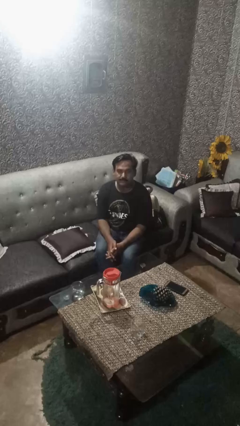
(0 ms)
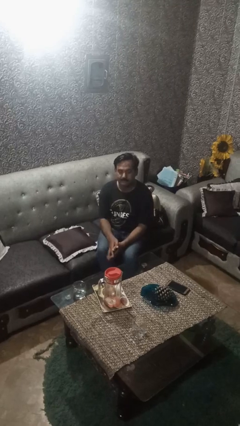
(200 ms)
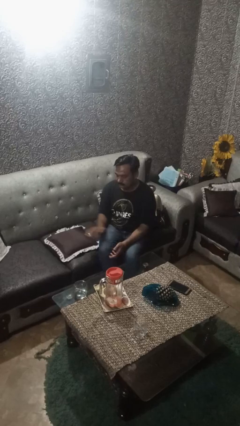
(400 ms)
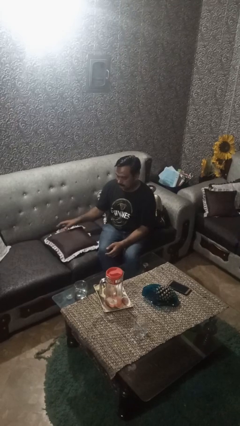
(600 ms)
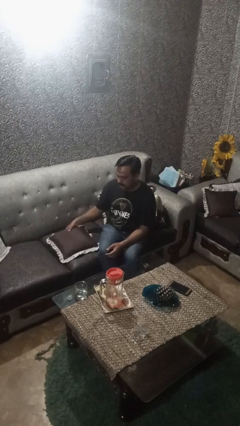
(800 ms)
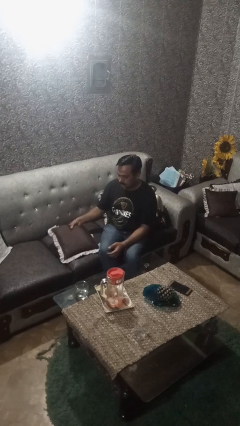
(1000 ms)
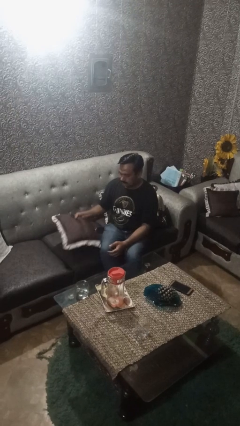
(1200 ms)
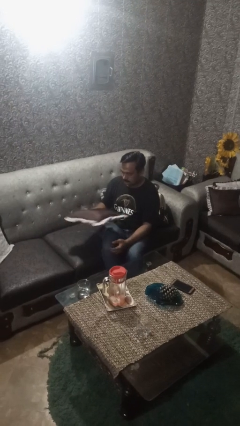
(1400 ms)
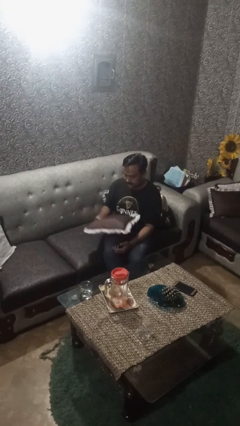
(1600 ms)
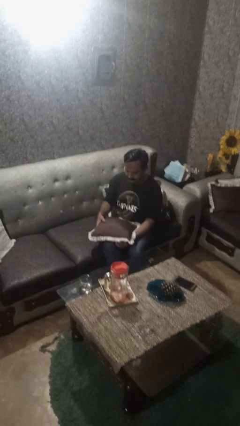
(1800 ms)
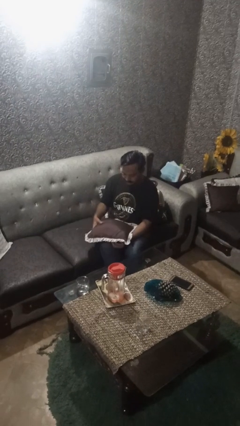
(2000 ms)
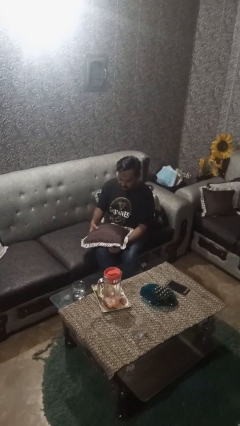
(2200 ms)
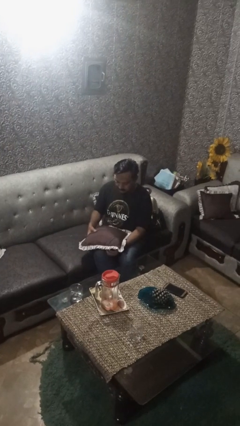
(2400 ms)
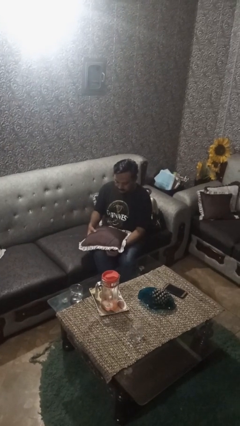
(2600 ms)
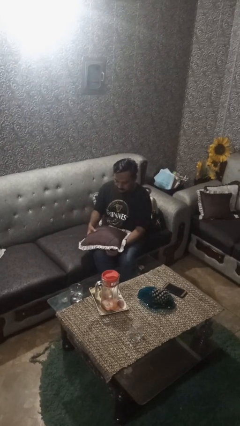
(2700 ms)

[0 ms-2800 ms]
person picks up object from couch

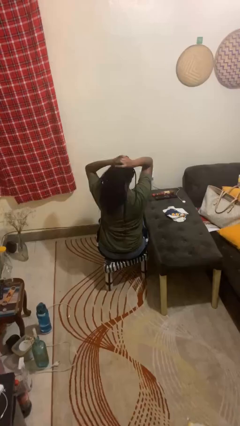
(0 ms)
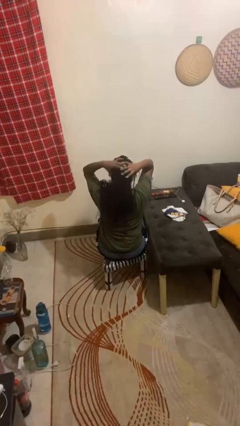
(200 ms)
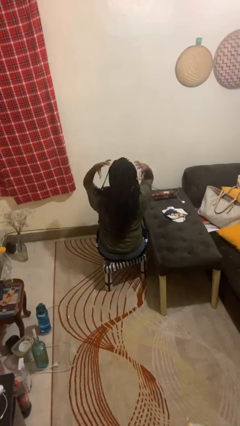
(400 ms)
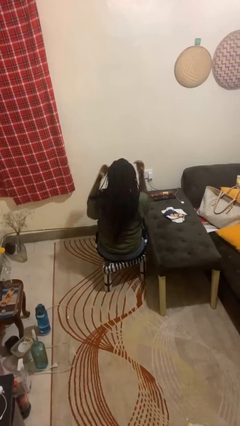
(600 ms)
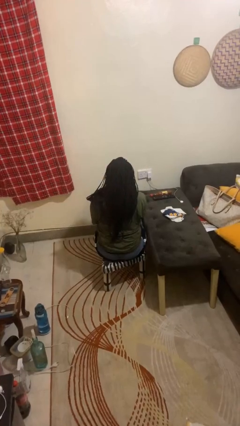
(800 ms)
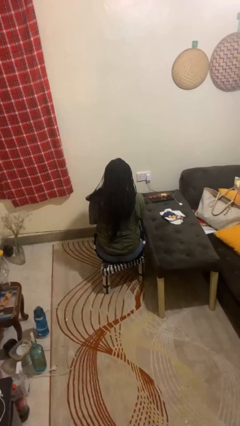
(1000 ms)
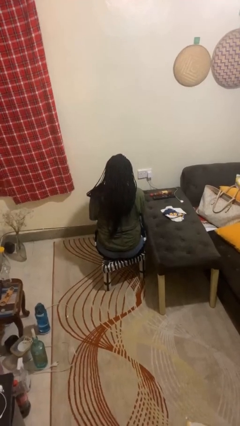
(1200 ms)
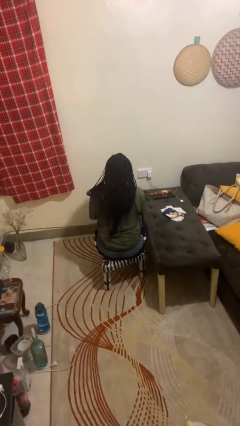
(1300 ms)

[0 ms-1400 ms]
person takes off hairtie

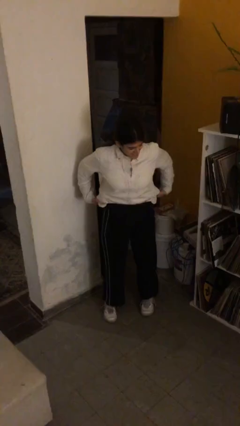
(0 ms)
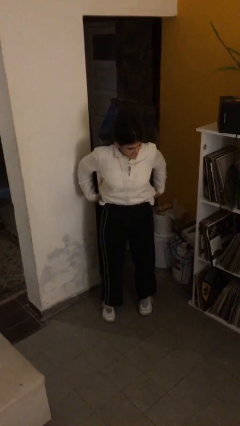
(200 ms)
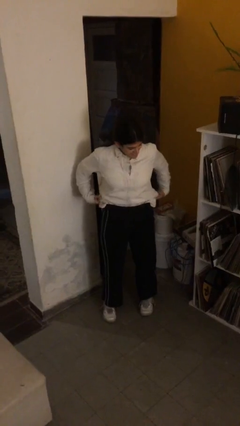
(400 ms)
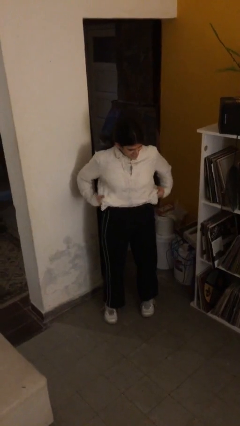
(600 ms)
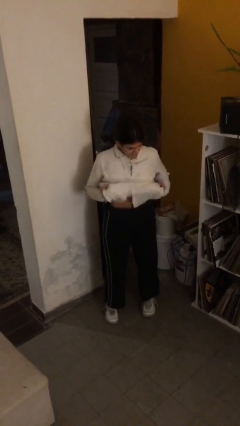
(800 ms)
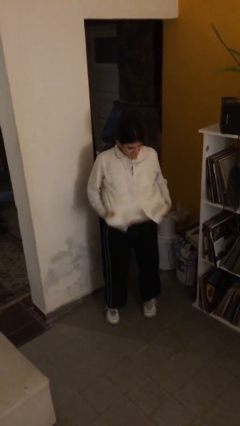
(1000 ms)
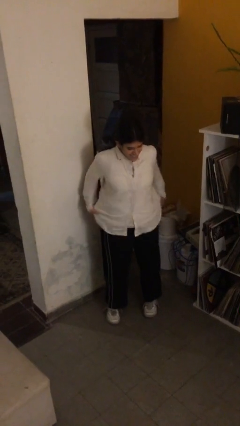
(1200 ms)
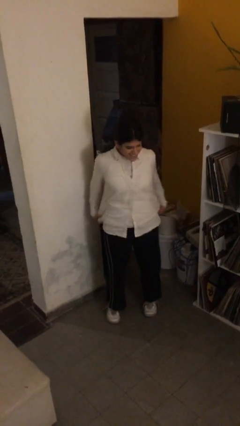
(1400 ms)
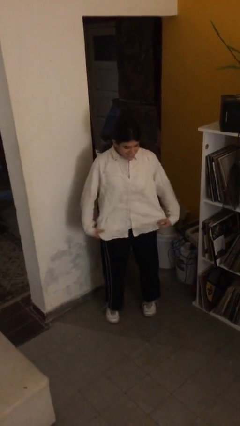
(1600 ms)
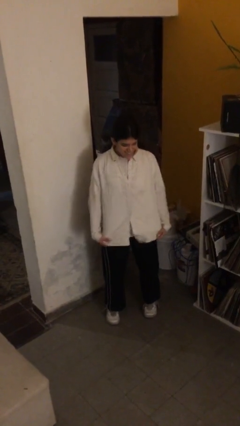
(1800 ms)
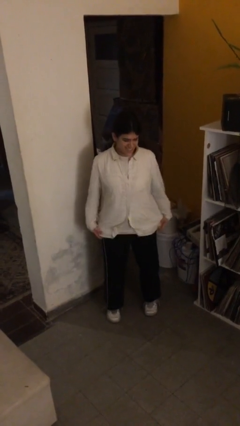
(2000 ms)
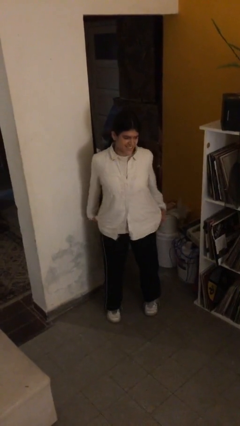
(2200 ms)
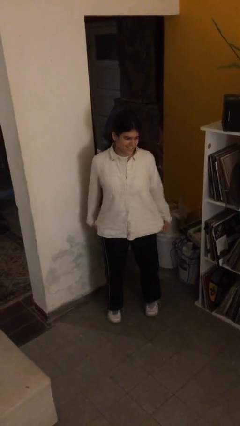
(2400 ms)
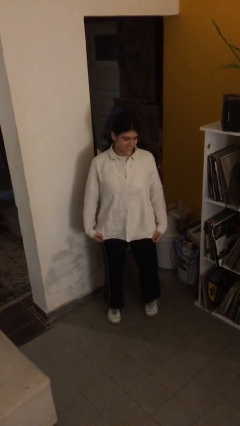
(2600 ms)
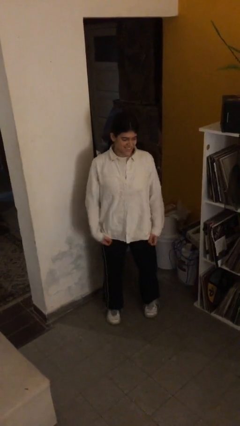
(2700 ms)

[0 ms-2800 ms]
person untucks shirt

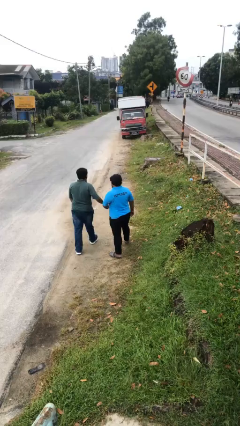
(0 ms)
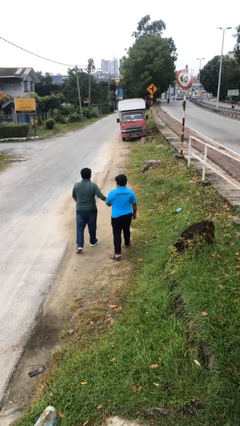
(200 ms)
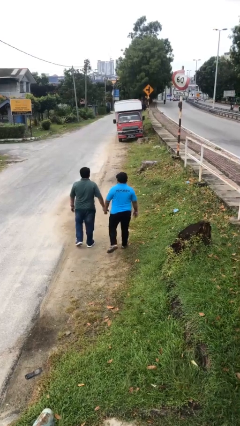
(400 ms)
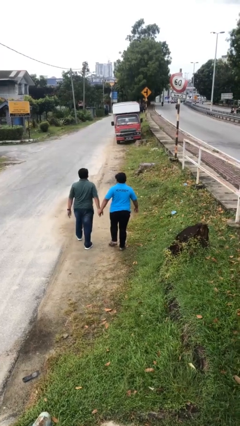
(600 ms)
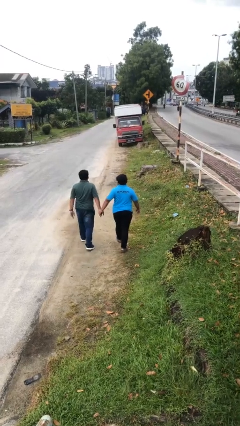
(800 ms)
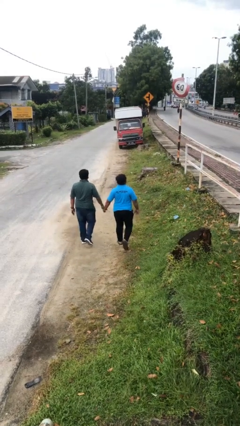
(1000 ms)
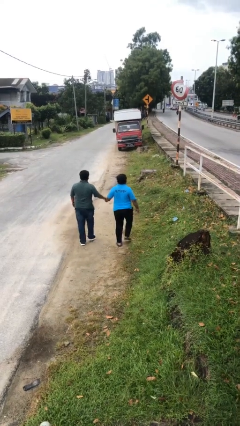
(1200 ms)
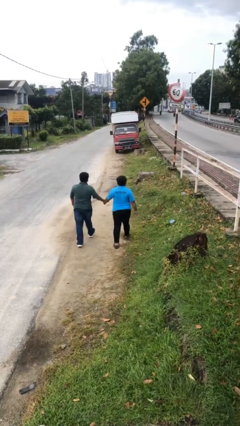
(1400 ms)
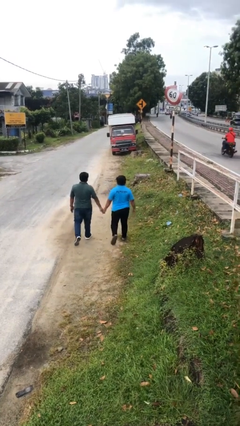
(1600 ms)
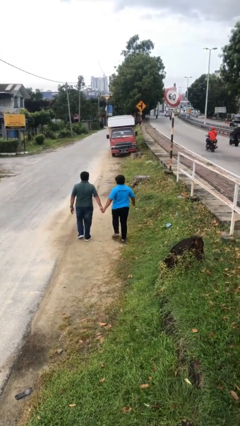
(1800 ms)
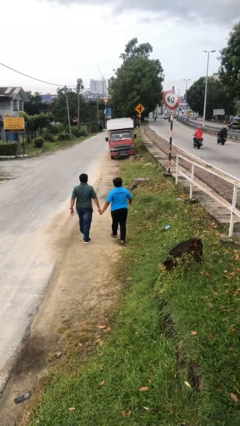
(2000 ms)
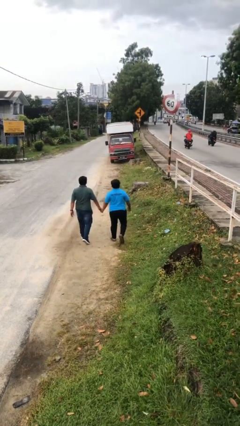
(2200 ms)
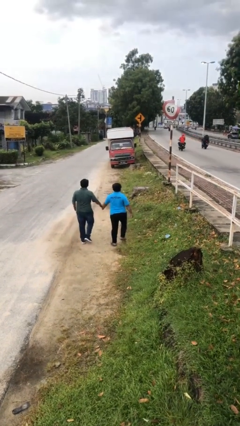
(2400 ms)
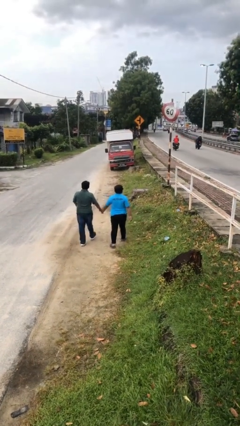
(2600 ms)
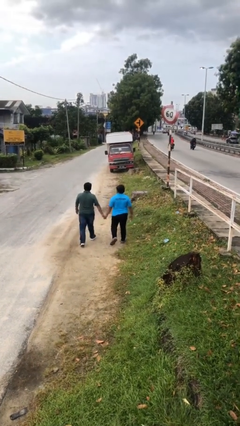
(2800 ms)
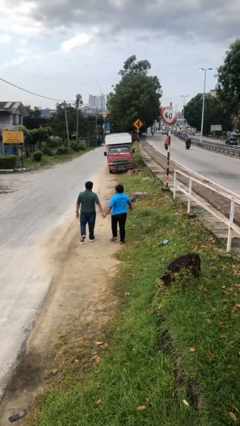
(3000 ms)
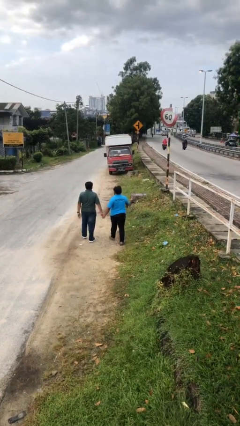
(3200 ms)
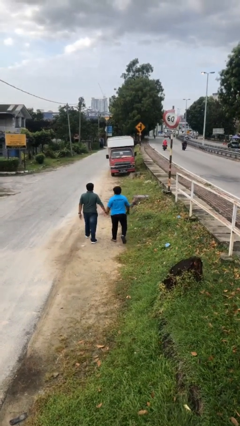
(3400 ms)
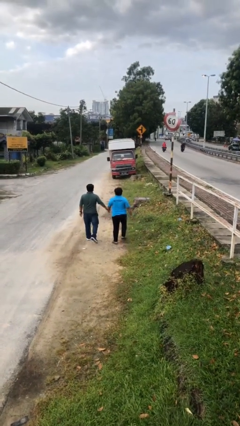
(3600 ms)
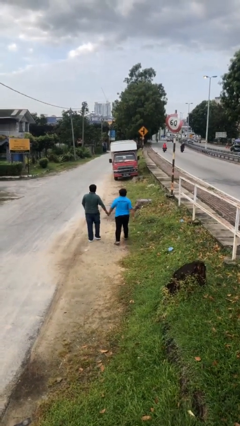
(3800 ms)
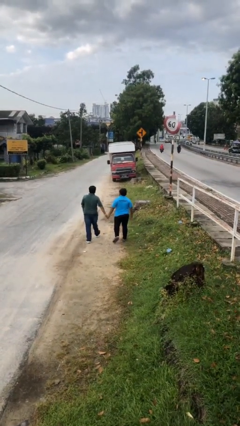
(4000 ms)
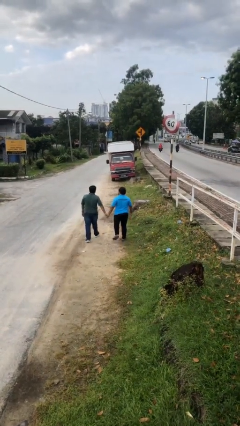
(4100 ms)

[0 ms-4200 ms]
person holds hand

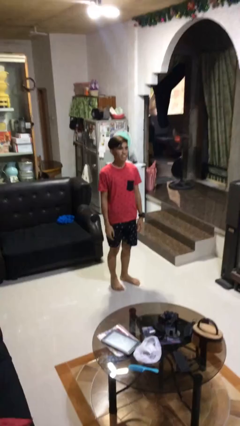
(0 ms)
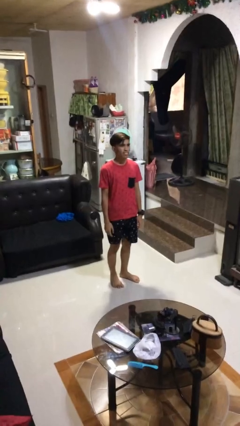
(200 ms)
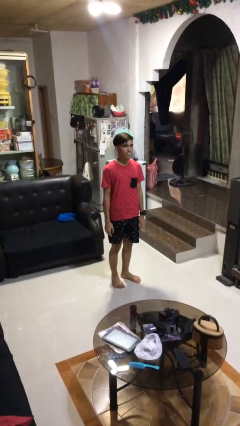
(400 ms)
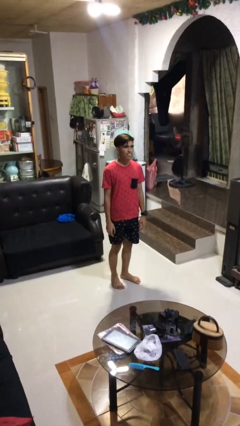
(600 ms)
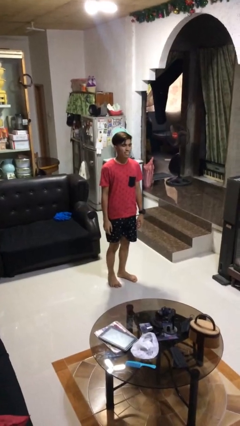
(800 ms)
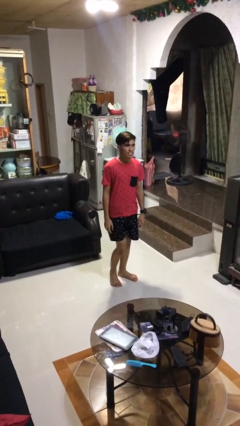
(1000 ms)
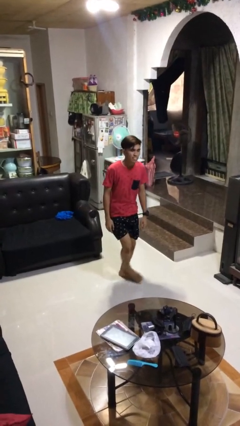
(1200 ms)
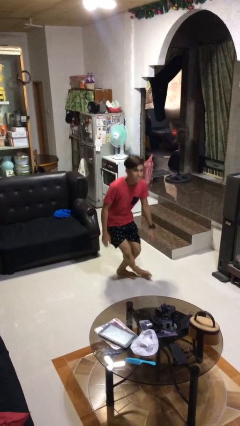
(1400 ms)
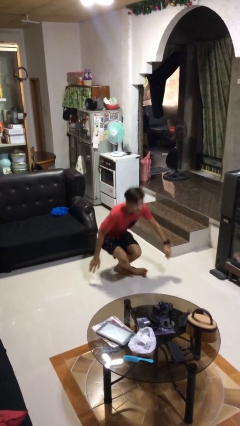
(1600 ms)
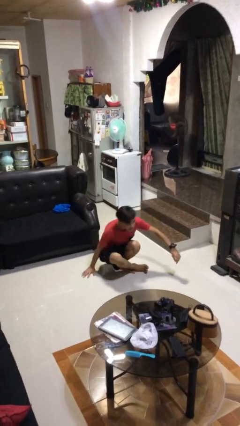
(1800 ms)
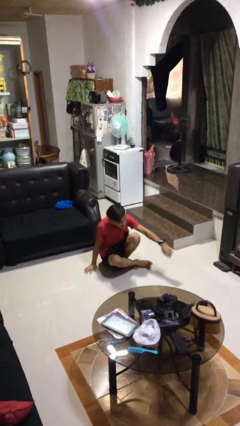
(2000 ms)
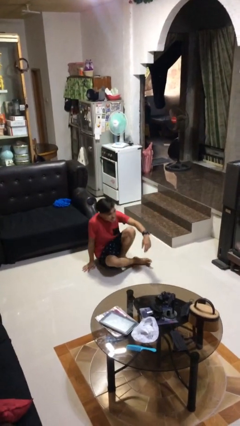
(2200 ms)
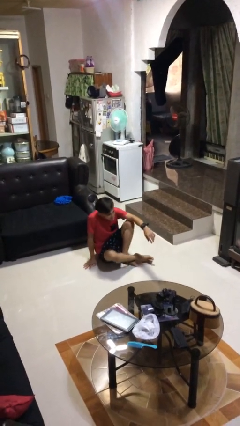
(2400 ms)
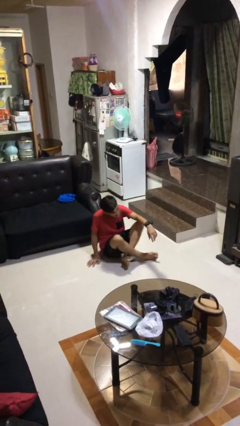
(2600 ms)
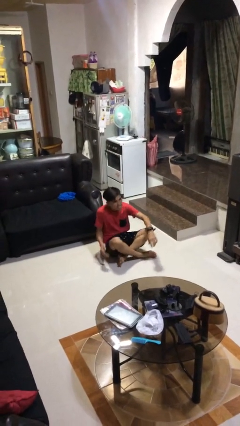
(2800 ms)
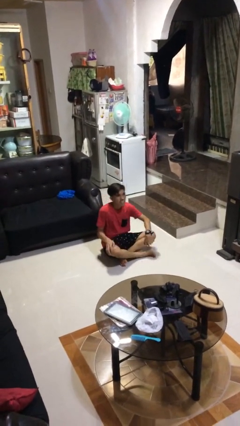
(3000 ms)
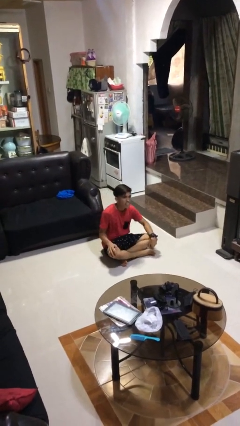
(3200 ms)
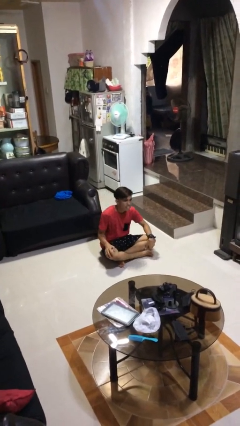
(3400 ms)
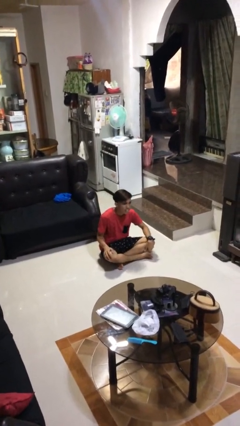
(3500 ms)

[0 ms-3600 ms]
person sits crisscross

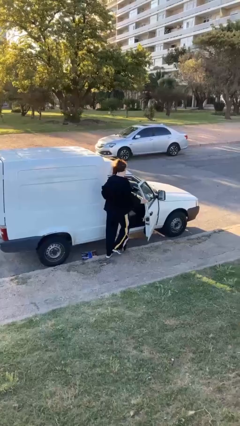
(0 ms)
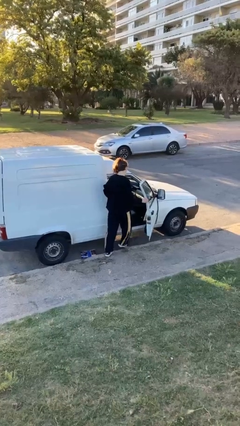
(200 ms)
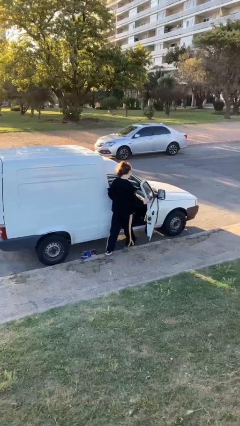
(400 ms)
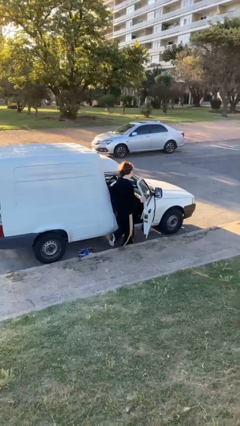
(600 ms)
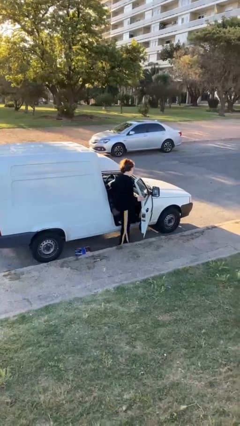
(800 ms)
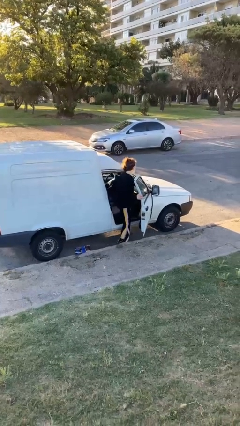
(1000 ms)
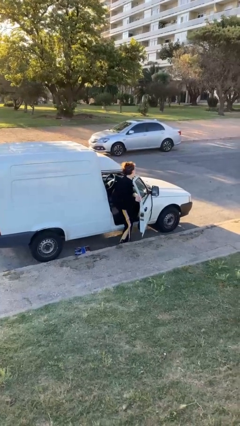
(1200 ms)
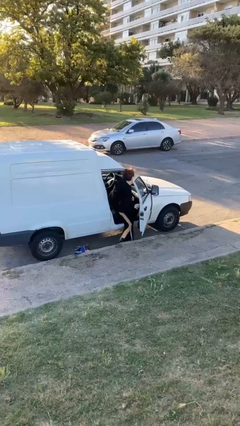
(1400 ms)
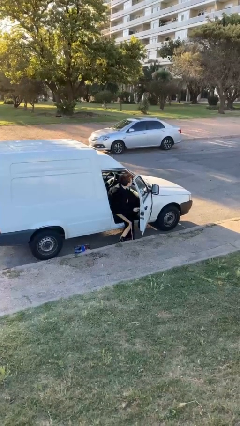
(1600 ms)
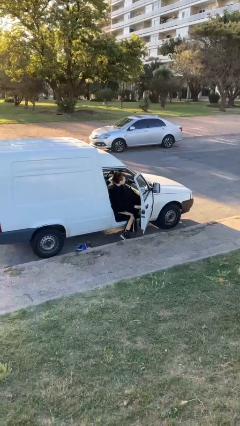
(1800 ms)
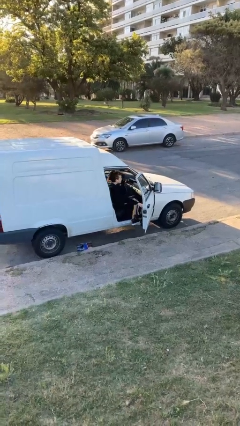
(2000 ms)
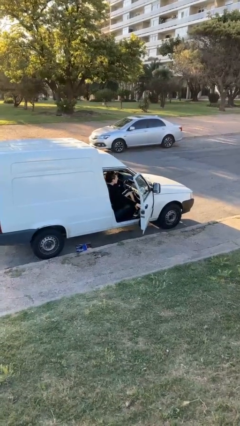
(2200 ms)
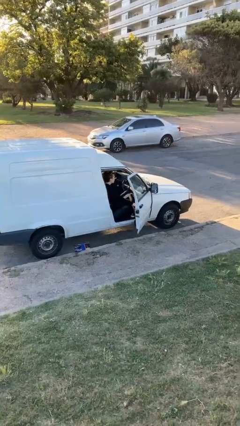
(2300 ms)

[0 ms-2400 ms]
person enters car
